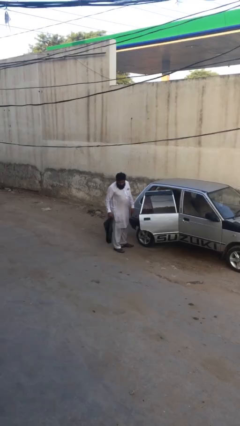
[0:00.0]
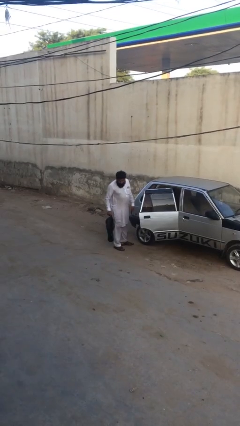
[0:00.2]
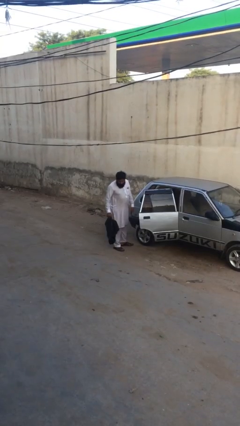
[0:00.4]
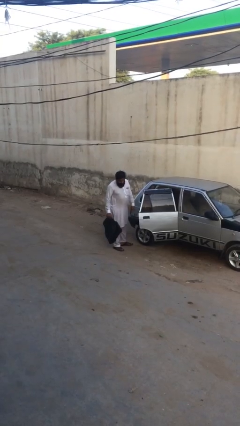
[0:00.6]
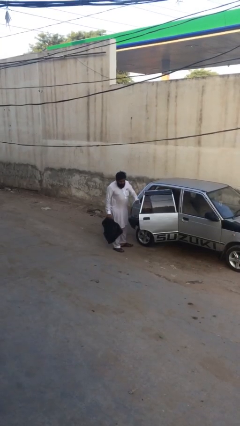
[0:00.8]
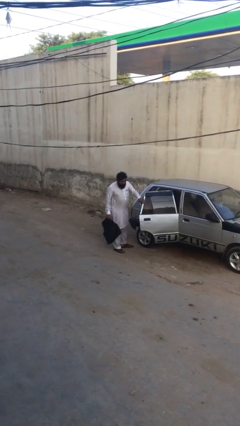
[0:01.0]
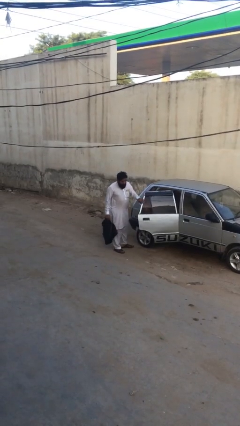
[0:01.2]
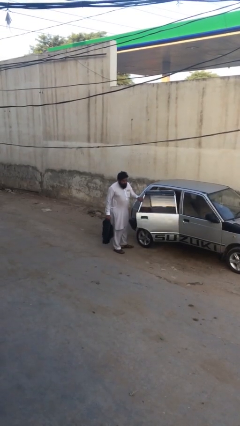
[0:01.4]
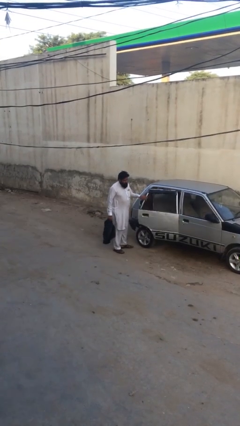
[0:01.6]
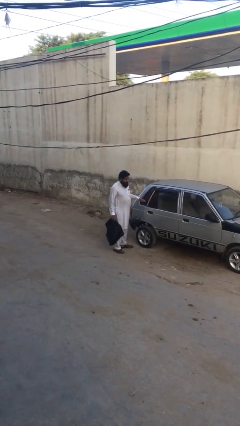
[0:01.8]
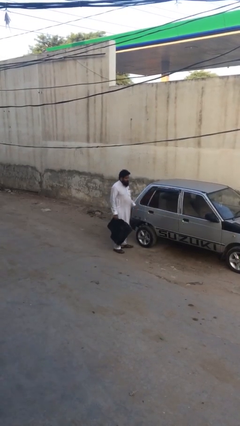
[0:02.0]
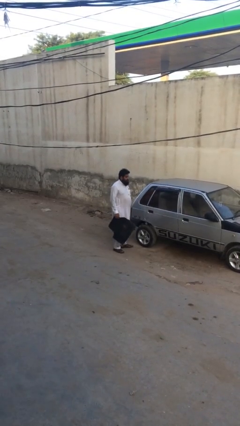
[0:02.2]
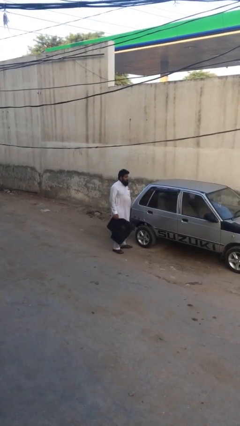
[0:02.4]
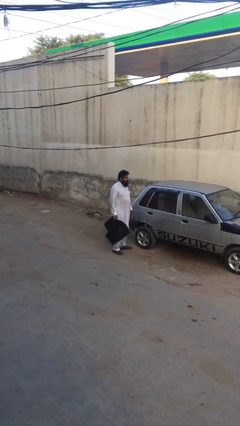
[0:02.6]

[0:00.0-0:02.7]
person closes car door

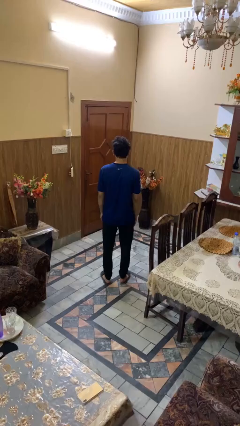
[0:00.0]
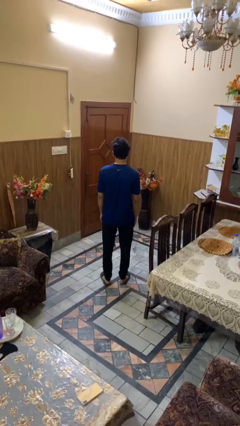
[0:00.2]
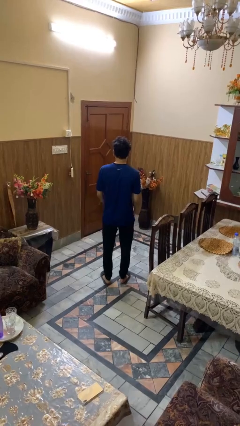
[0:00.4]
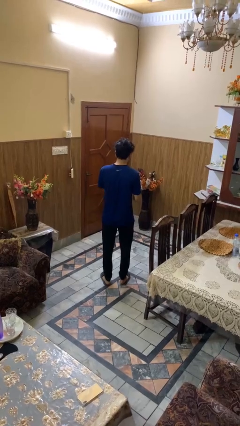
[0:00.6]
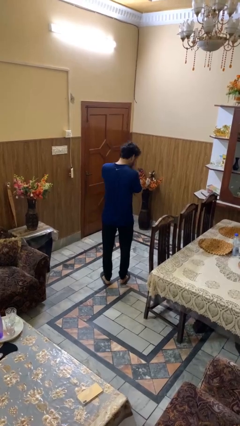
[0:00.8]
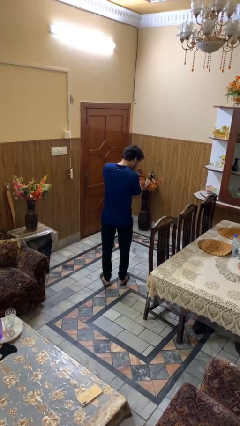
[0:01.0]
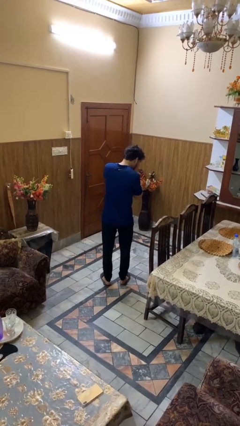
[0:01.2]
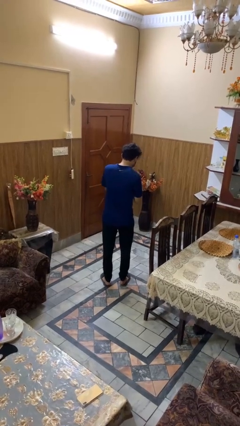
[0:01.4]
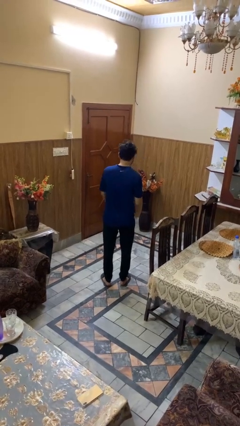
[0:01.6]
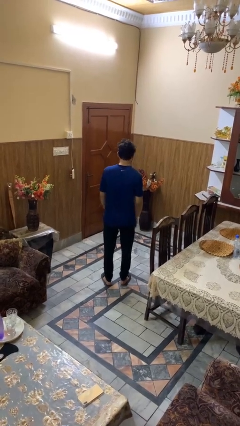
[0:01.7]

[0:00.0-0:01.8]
person sneezes into hand

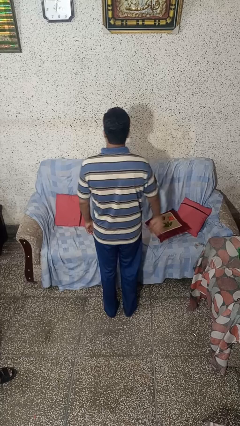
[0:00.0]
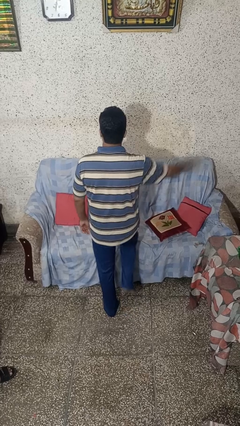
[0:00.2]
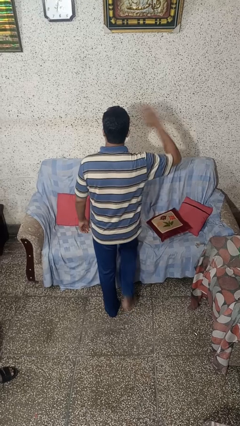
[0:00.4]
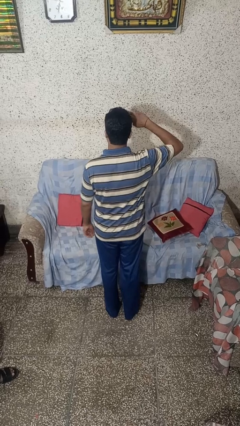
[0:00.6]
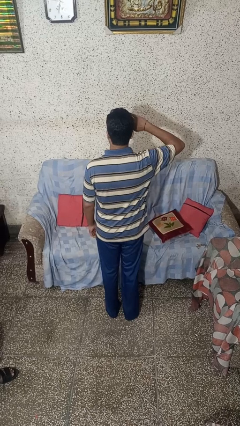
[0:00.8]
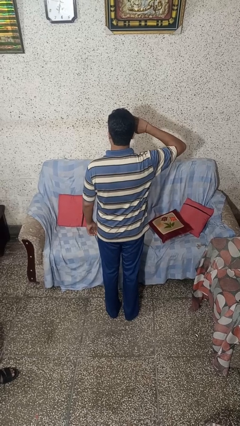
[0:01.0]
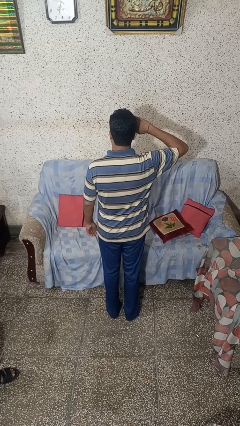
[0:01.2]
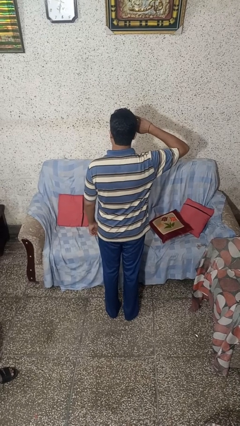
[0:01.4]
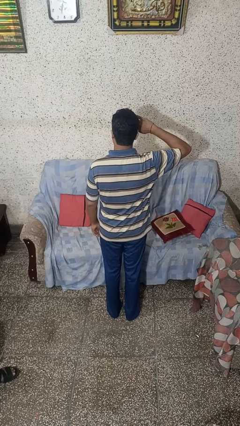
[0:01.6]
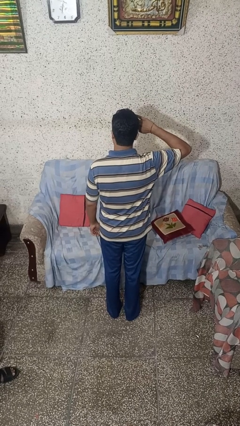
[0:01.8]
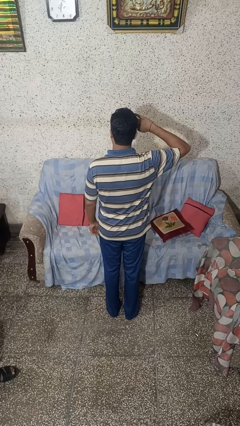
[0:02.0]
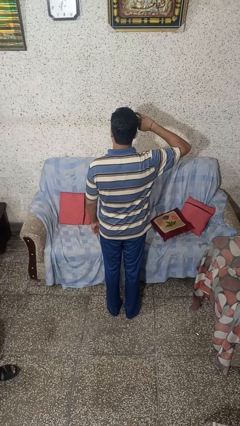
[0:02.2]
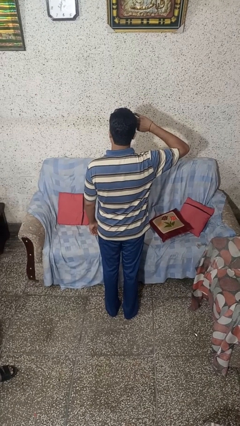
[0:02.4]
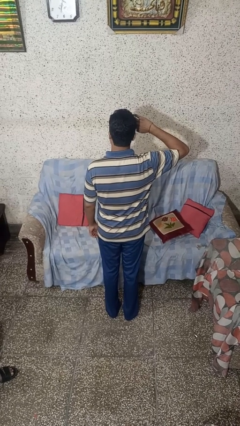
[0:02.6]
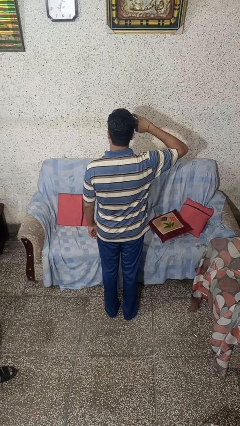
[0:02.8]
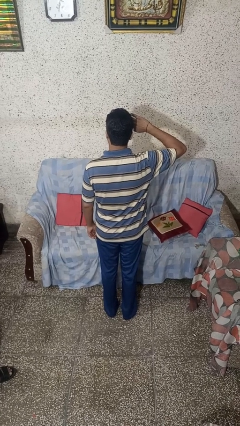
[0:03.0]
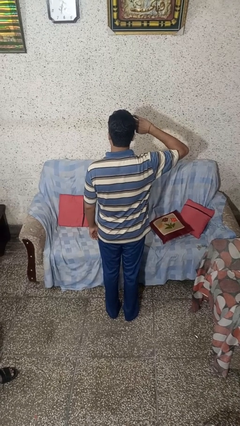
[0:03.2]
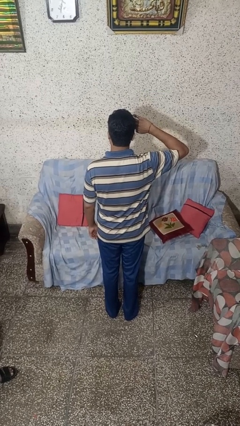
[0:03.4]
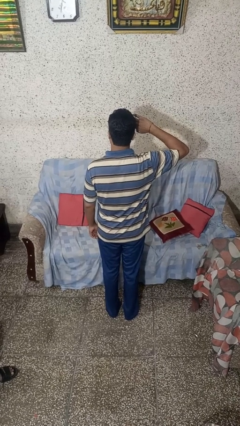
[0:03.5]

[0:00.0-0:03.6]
person salutes

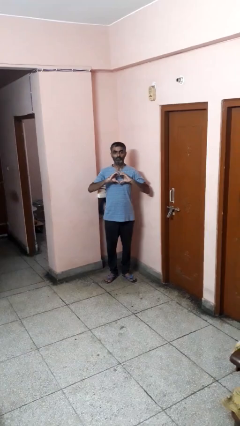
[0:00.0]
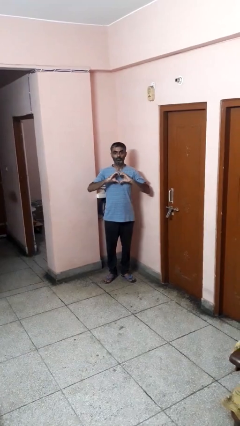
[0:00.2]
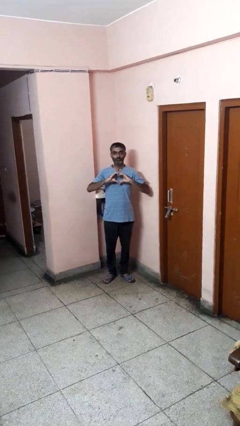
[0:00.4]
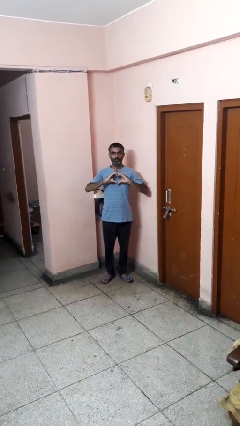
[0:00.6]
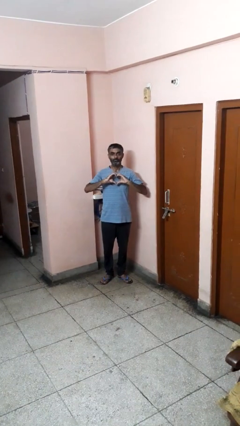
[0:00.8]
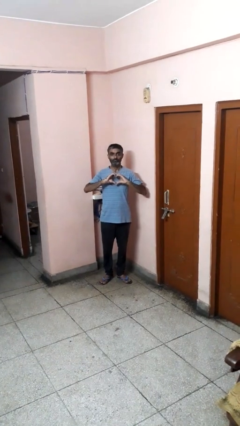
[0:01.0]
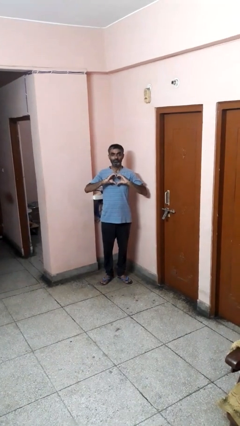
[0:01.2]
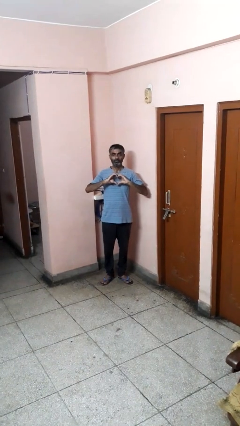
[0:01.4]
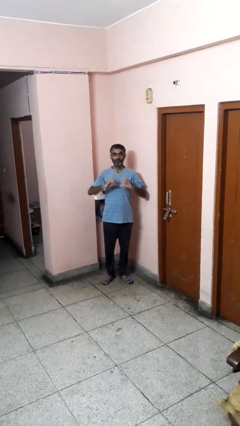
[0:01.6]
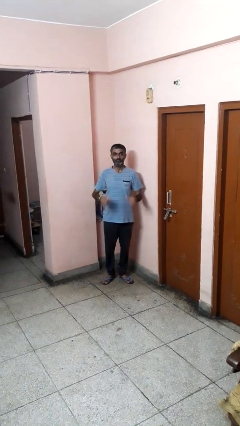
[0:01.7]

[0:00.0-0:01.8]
person gestures heart

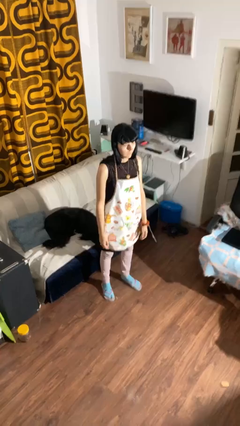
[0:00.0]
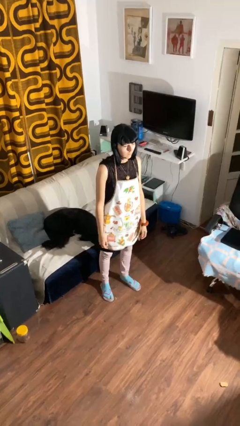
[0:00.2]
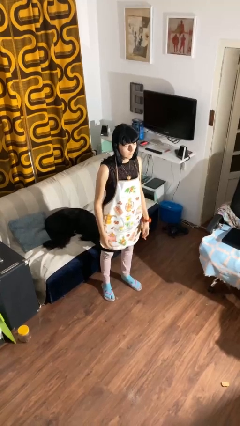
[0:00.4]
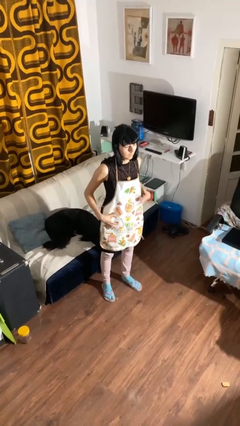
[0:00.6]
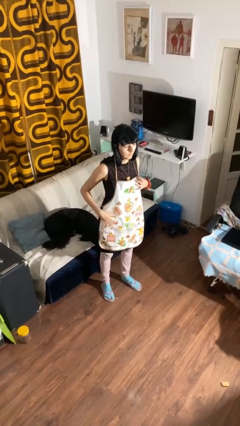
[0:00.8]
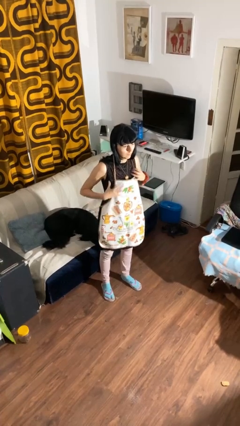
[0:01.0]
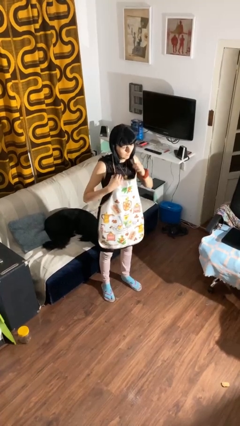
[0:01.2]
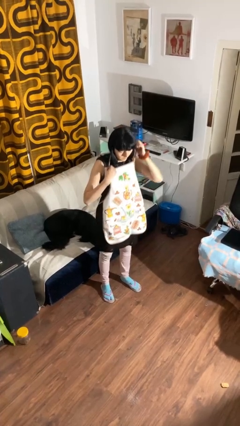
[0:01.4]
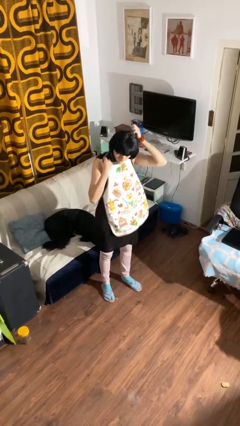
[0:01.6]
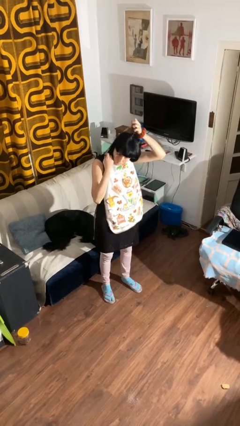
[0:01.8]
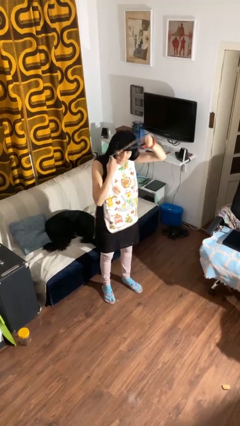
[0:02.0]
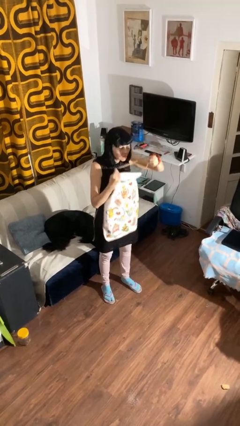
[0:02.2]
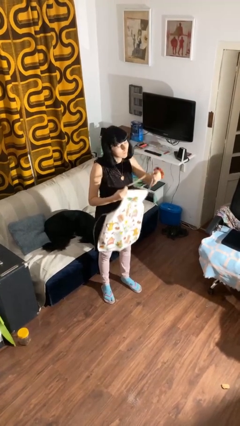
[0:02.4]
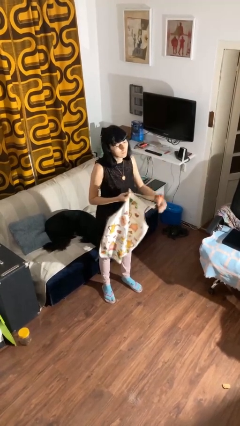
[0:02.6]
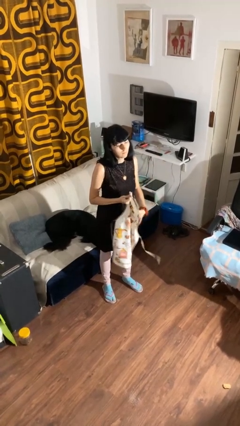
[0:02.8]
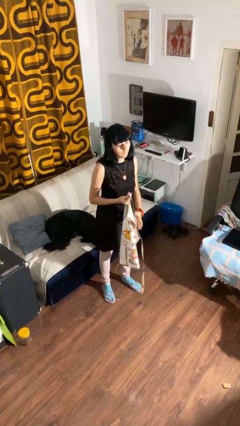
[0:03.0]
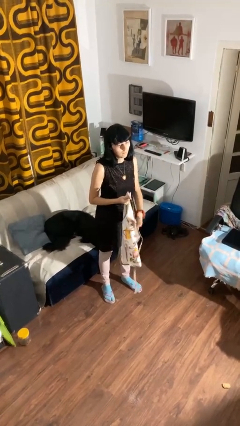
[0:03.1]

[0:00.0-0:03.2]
person takes off apron

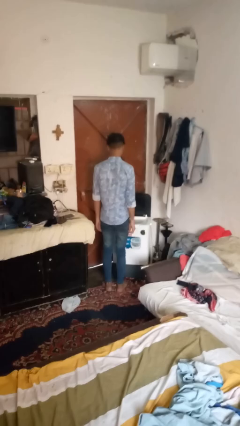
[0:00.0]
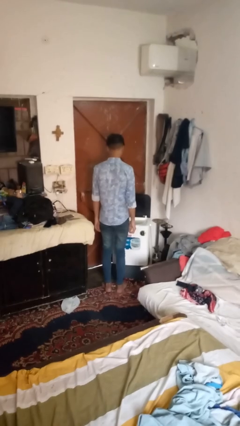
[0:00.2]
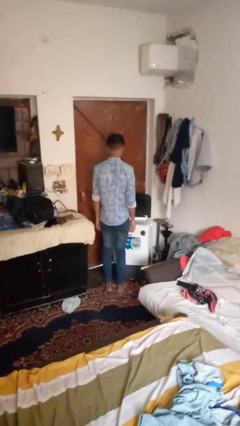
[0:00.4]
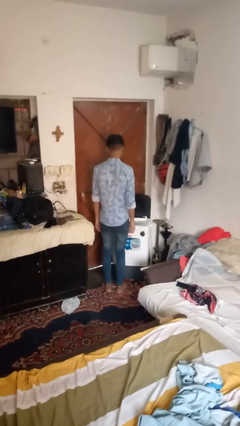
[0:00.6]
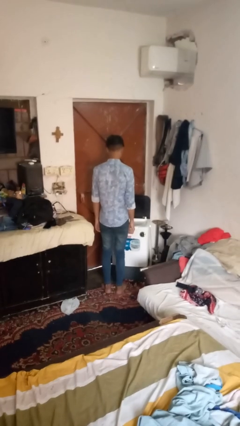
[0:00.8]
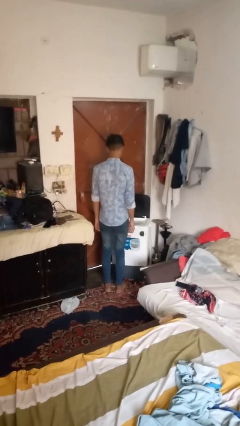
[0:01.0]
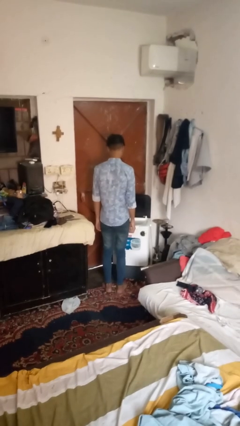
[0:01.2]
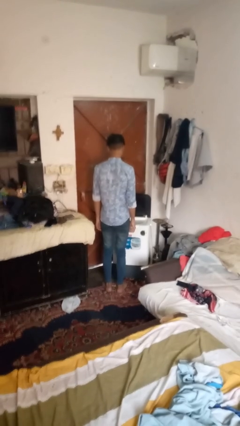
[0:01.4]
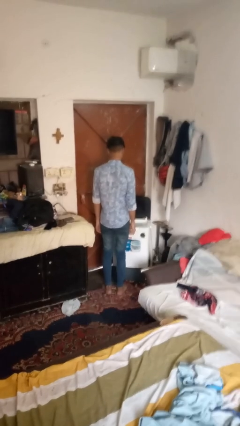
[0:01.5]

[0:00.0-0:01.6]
person opens clothes washer

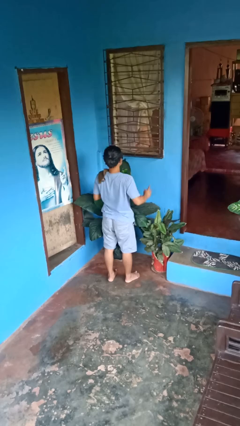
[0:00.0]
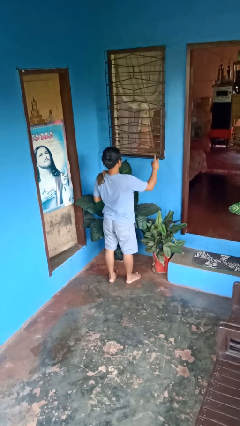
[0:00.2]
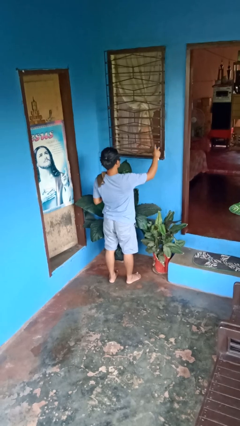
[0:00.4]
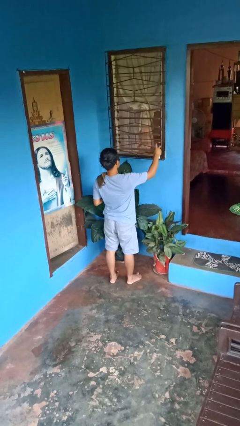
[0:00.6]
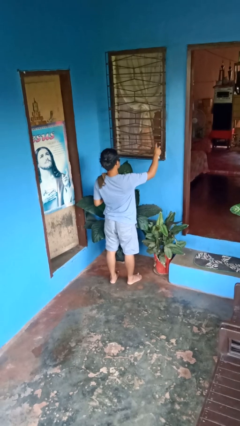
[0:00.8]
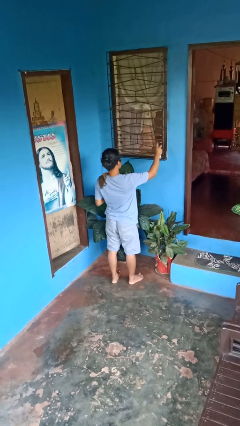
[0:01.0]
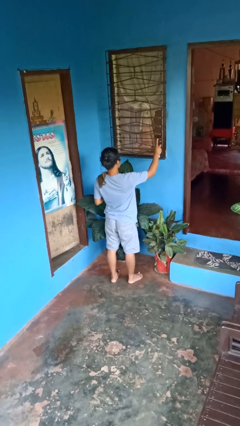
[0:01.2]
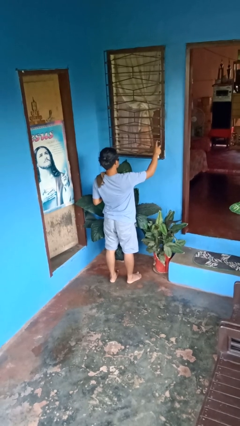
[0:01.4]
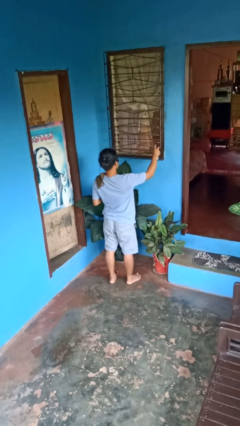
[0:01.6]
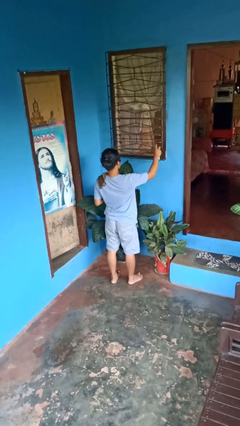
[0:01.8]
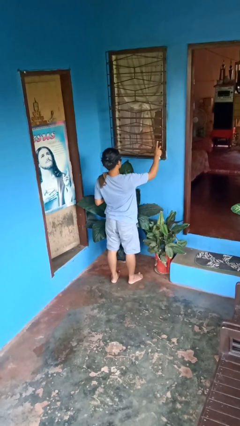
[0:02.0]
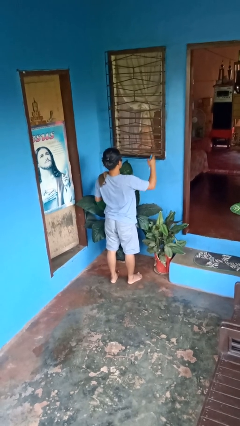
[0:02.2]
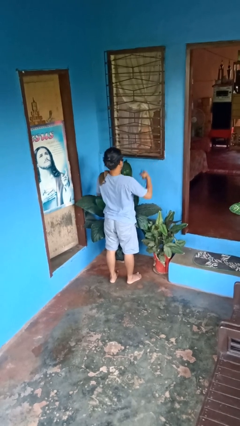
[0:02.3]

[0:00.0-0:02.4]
person sprays from bottle
